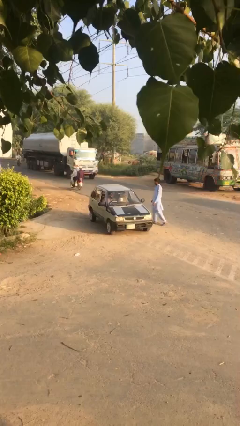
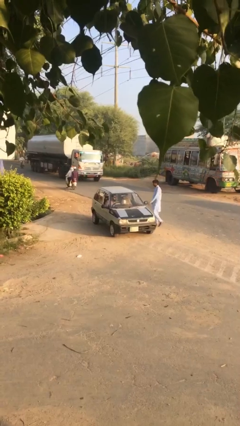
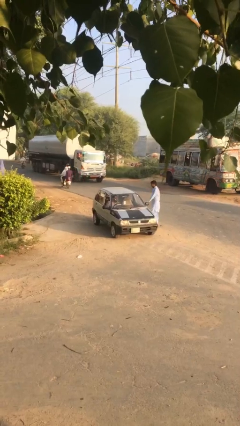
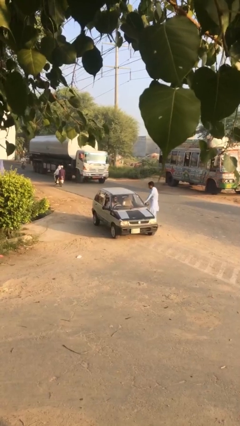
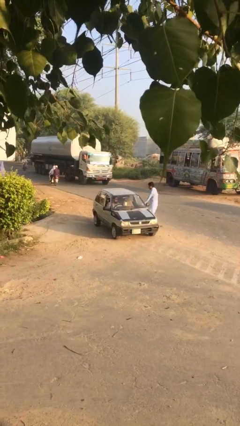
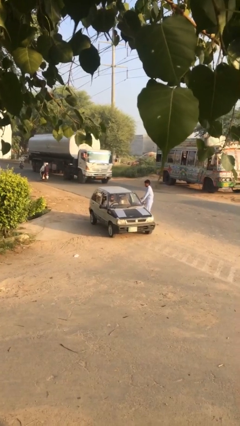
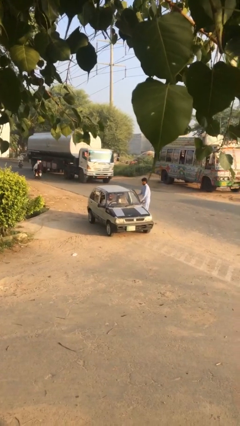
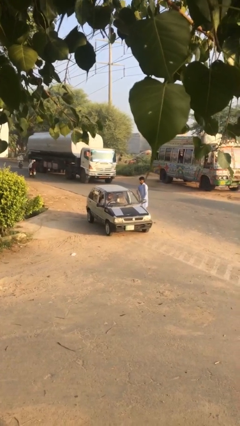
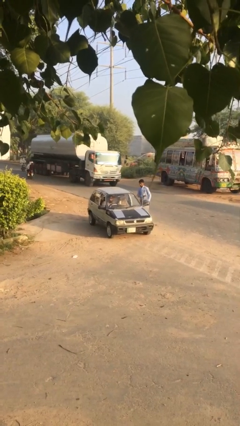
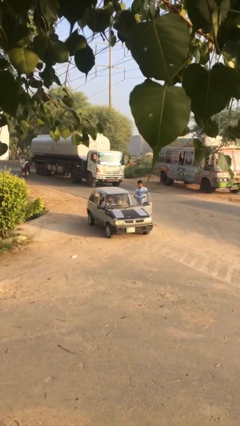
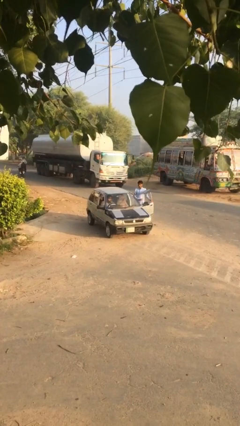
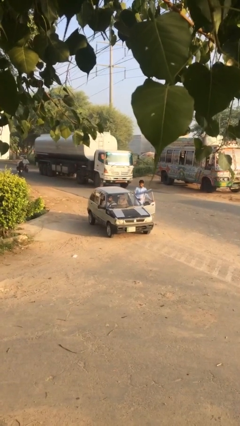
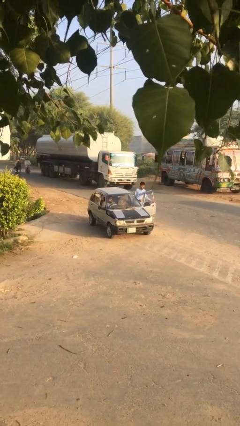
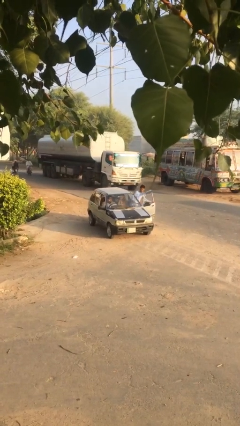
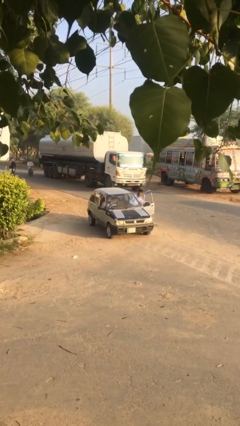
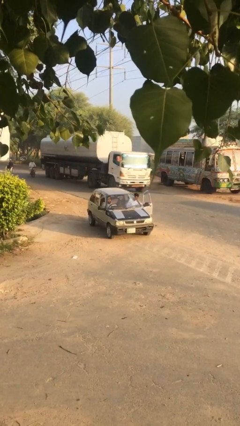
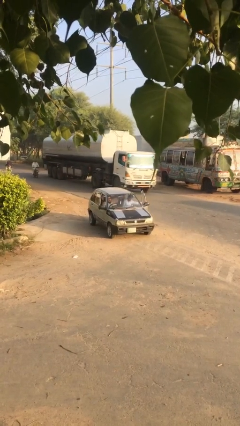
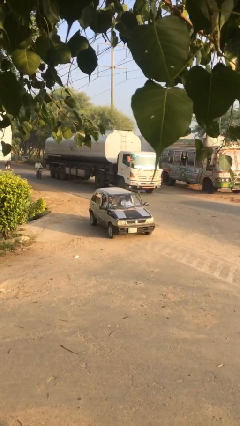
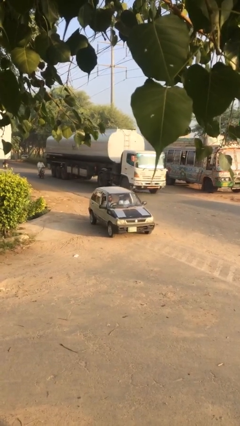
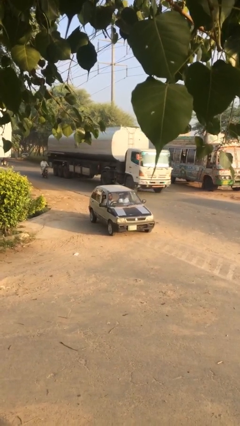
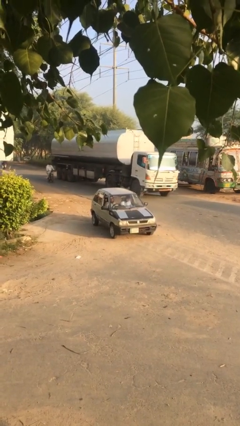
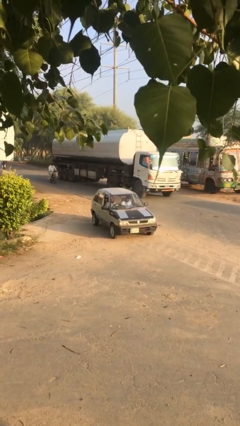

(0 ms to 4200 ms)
car picks up person

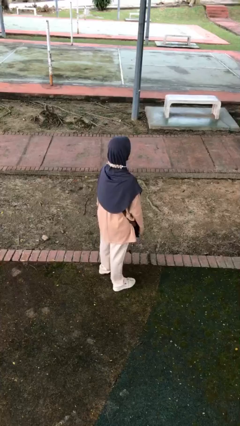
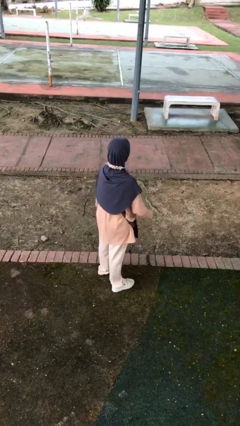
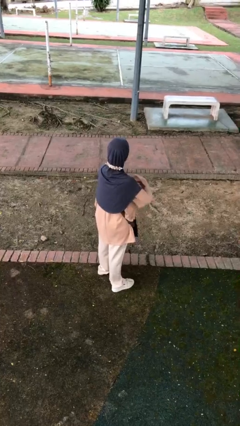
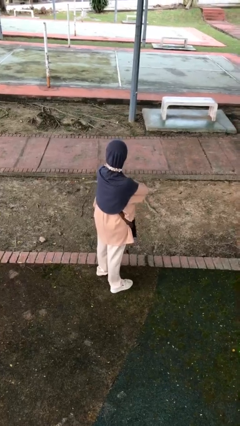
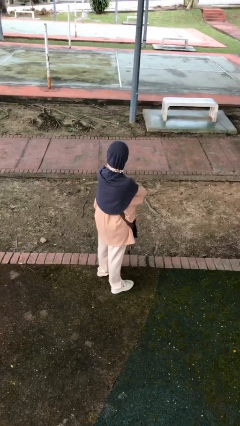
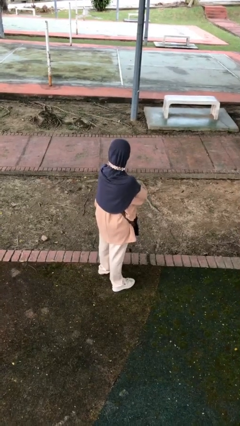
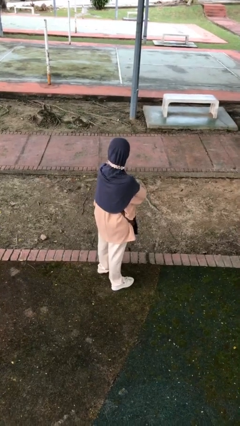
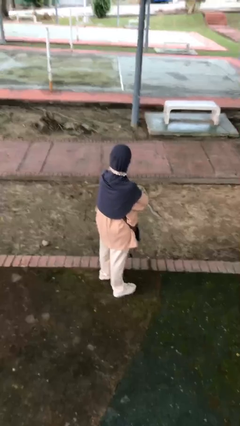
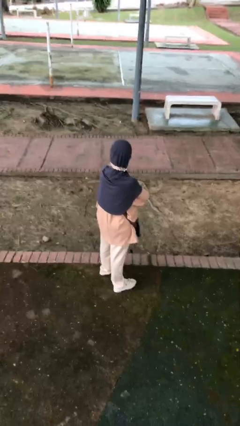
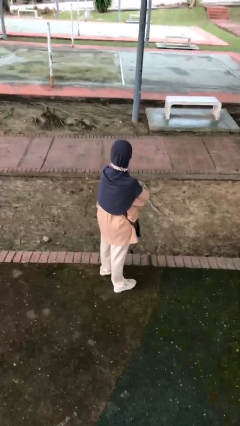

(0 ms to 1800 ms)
person crosses arms

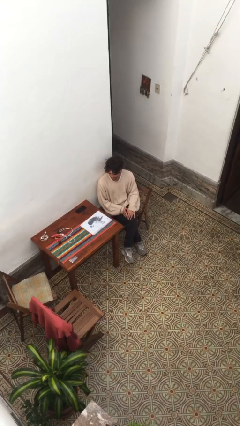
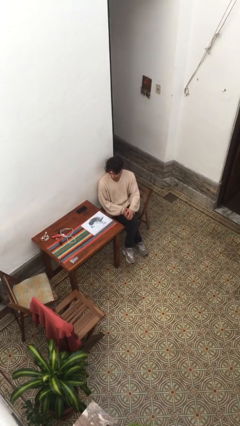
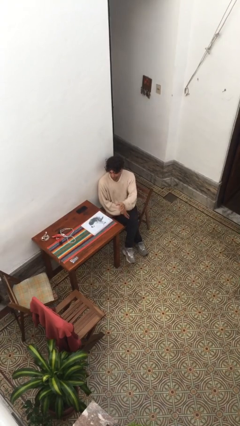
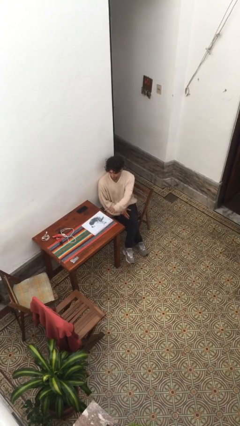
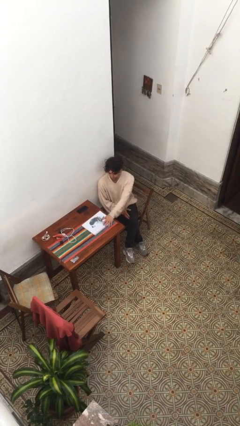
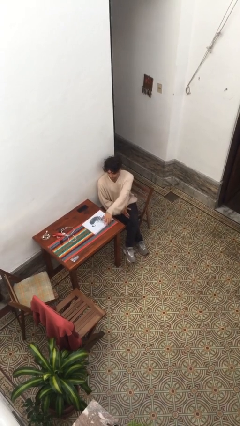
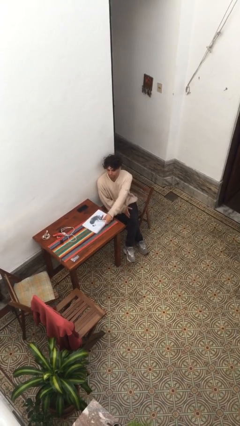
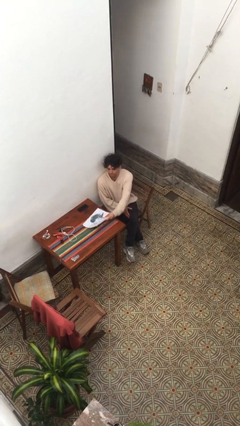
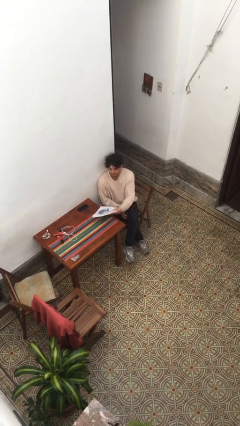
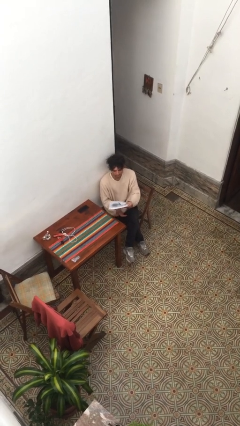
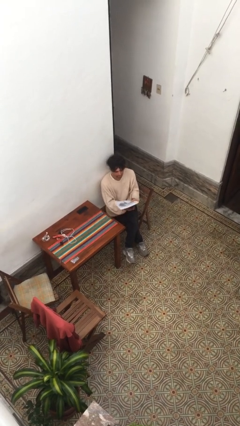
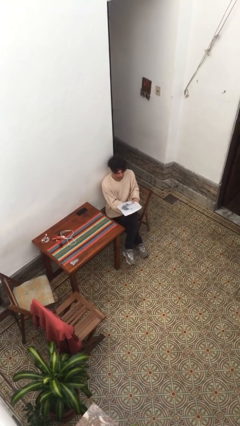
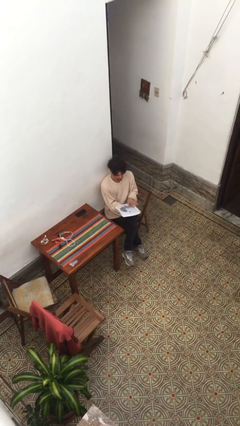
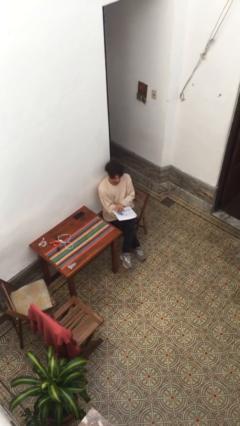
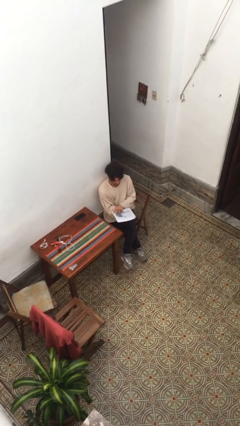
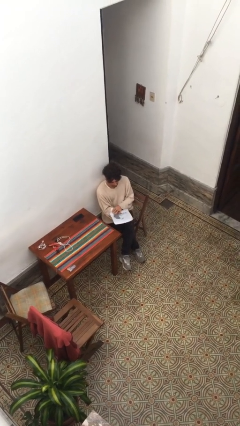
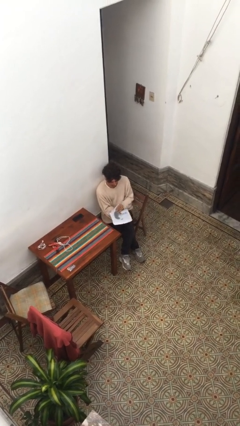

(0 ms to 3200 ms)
person picks up object from table

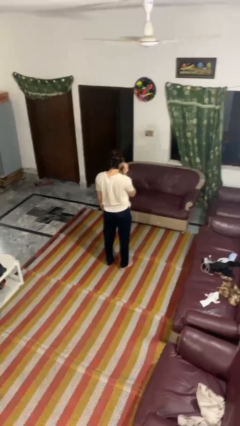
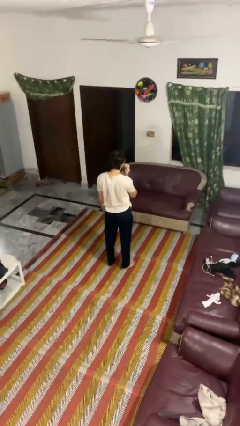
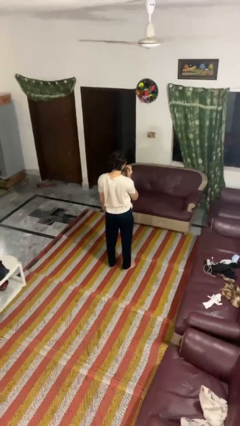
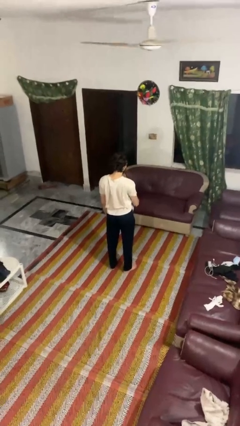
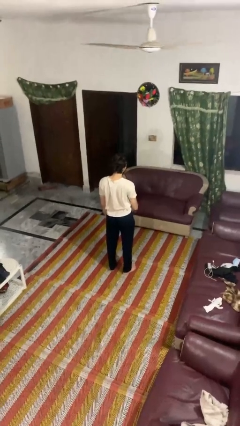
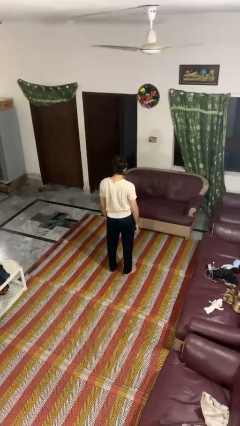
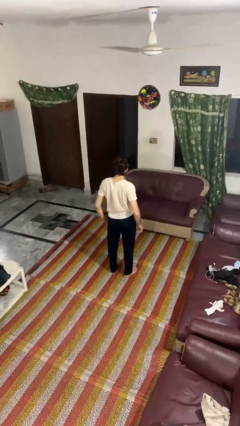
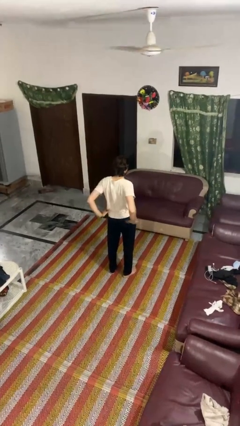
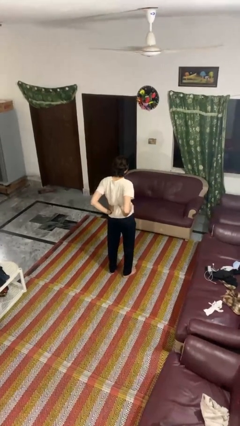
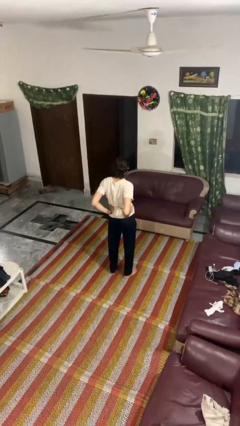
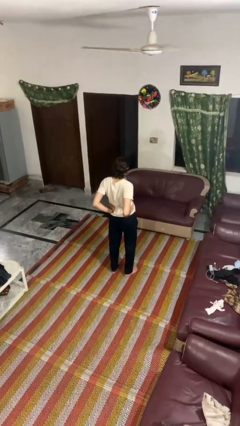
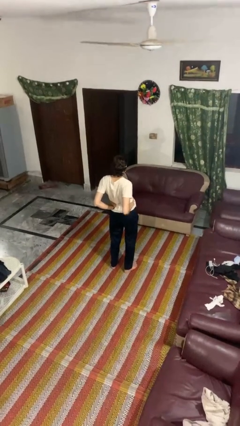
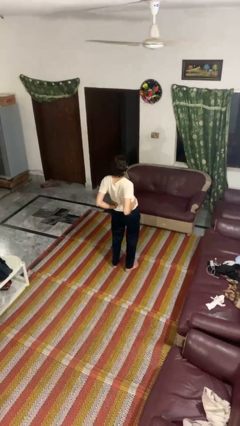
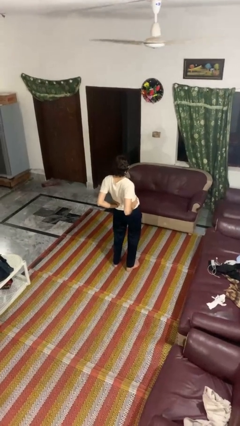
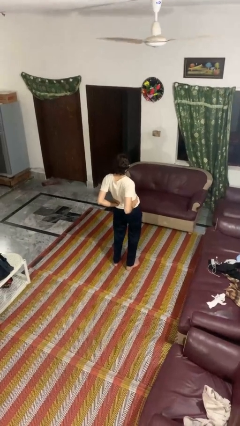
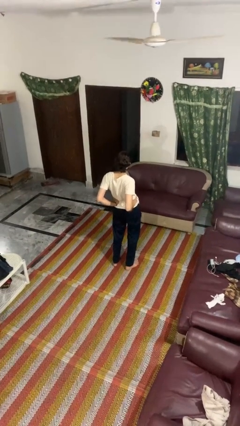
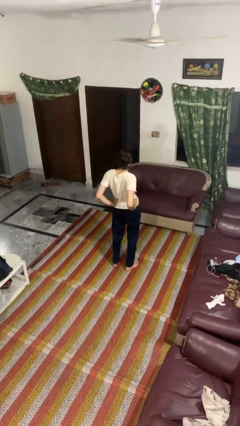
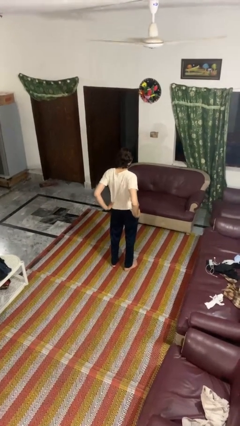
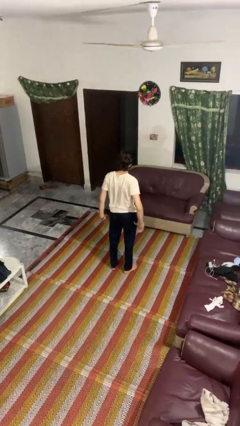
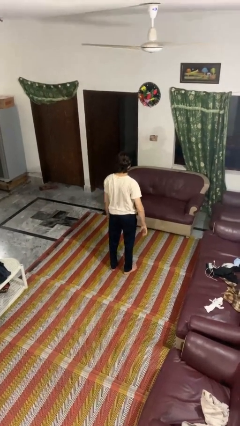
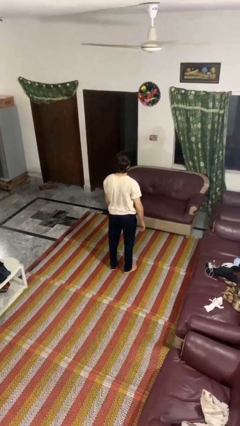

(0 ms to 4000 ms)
person stretches back

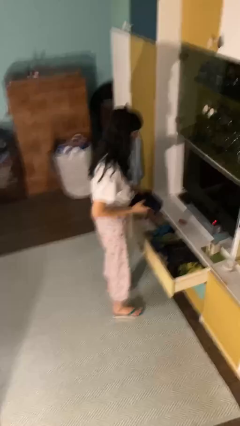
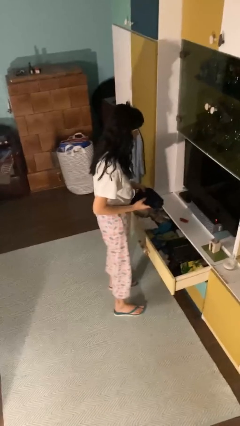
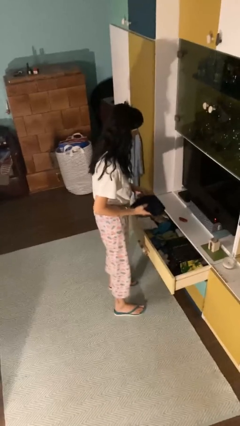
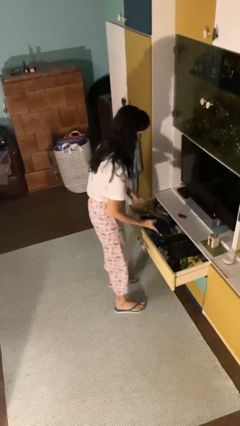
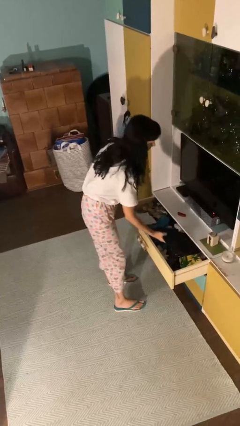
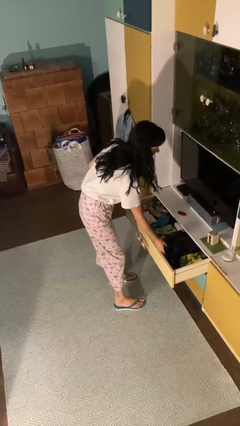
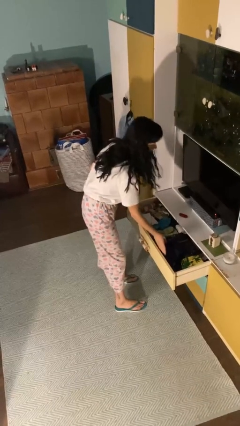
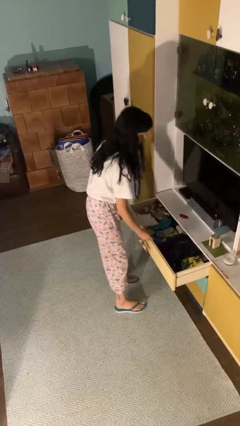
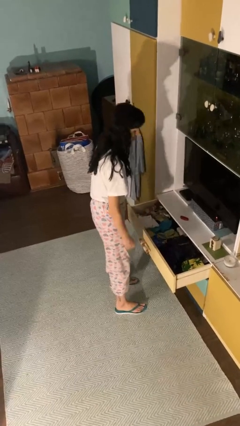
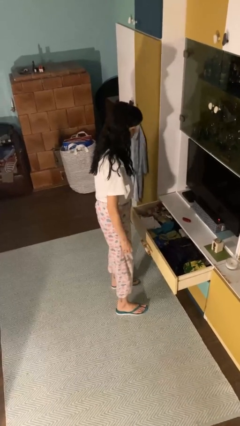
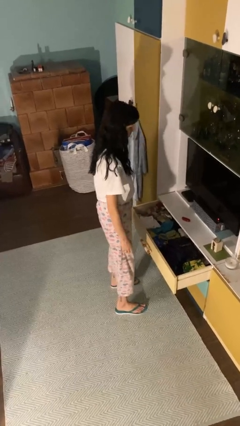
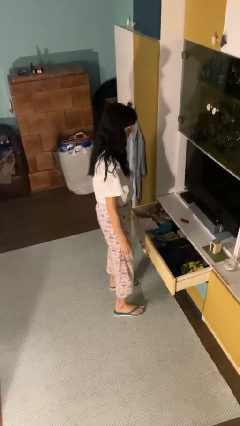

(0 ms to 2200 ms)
person puts clothes into dresser

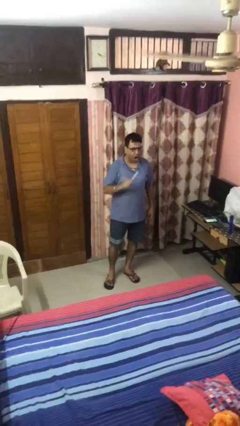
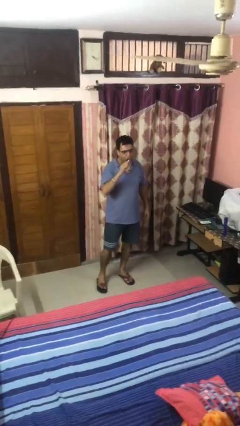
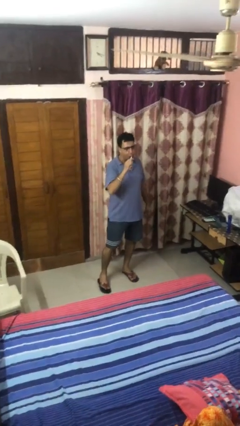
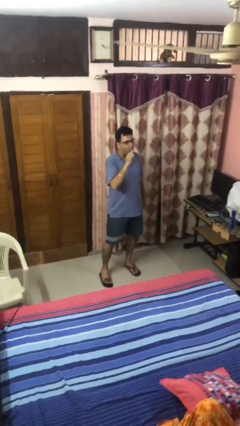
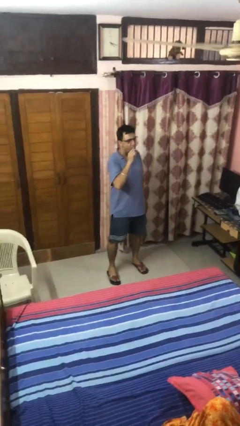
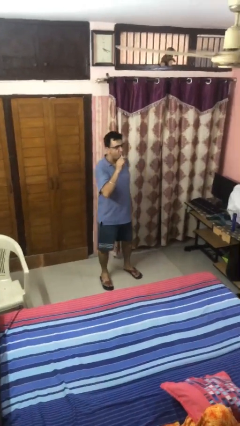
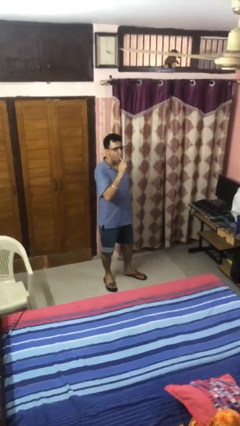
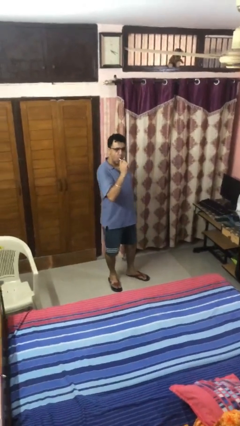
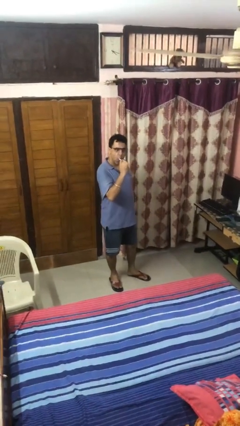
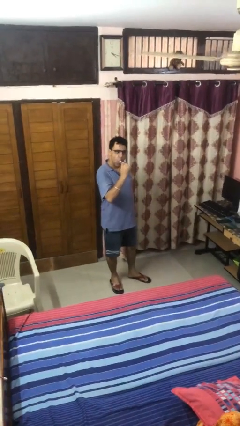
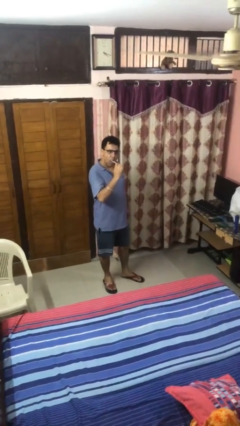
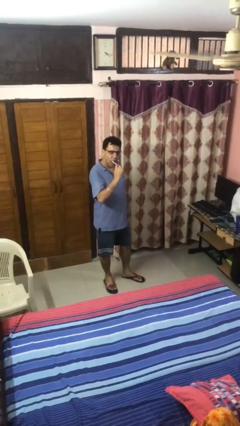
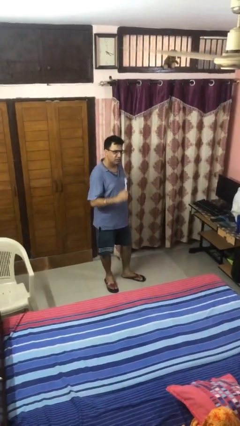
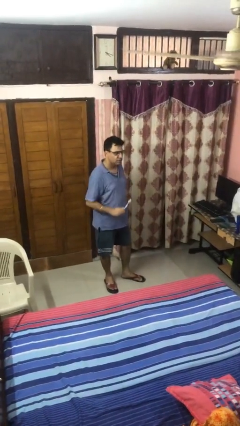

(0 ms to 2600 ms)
person brushes teeth
